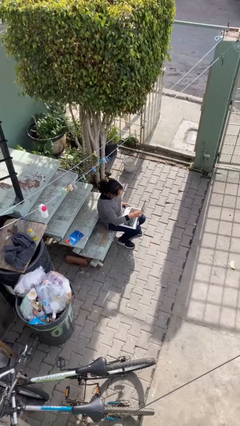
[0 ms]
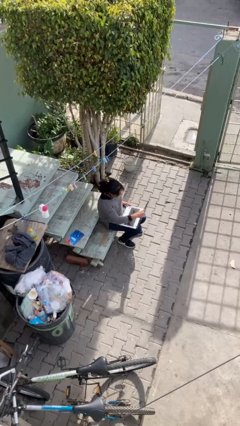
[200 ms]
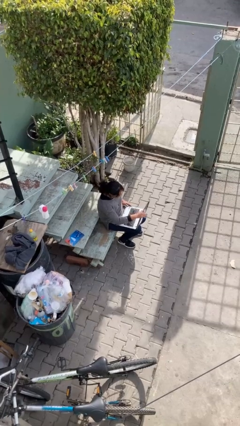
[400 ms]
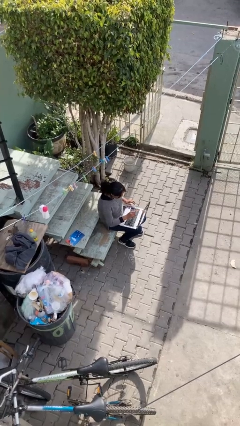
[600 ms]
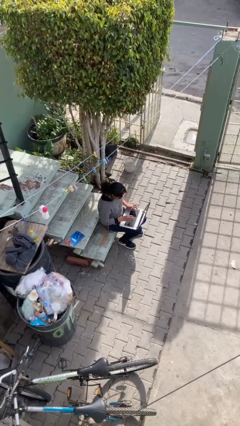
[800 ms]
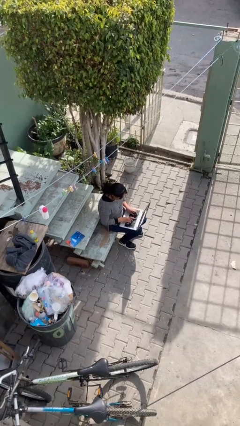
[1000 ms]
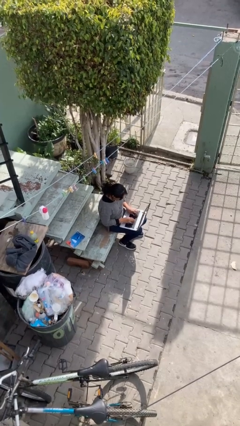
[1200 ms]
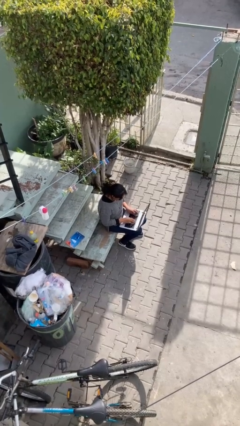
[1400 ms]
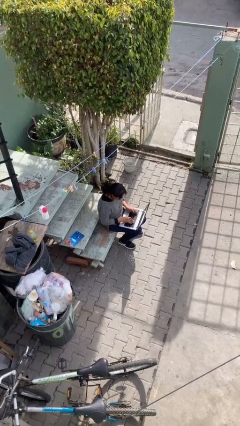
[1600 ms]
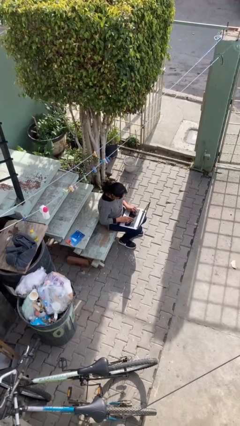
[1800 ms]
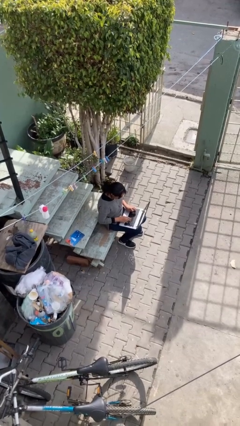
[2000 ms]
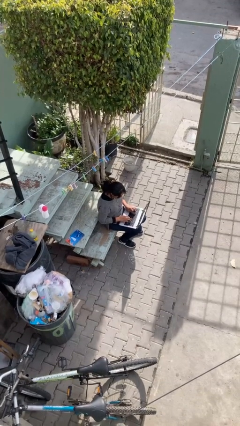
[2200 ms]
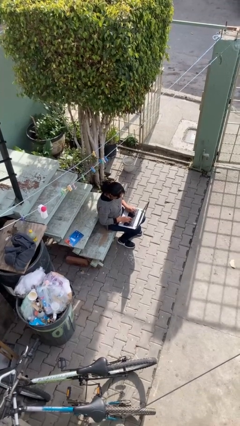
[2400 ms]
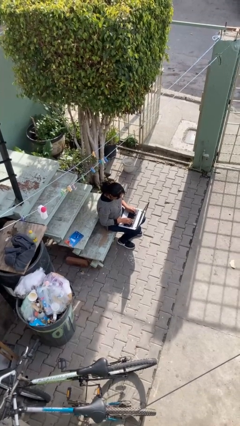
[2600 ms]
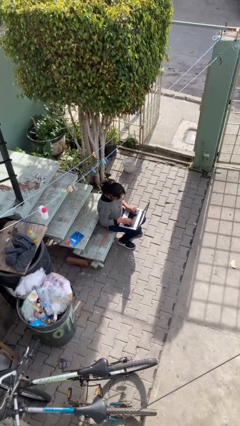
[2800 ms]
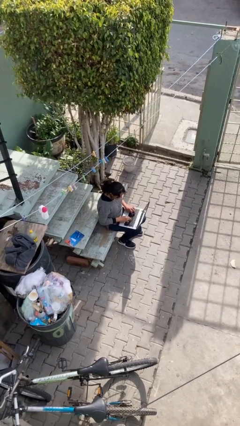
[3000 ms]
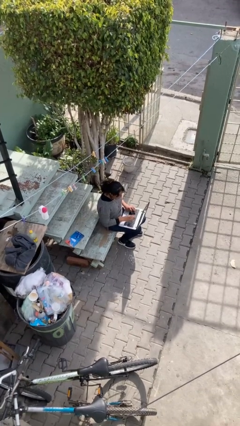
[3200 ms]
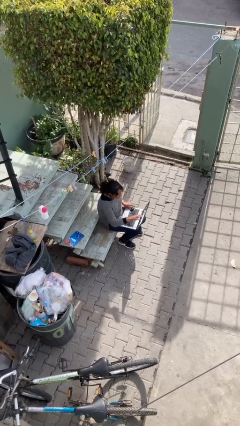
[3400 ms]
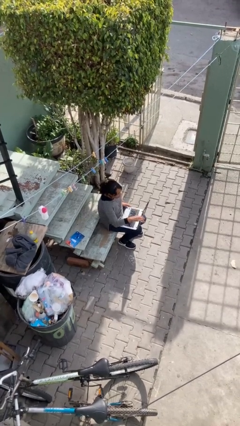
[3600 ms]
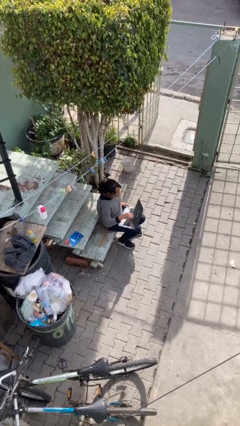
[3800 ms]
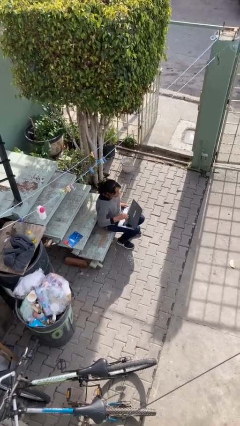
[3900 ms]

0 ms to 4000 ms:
person interacts with laptop

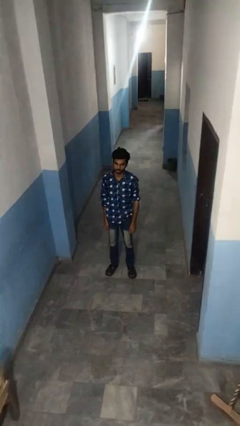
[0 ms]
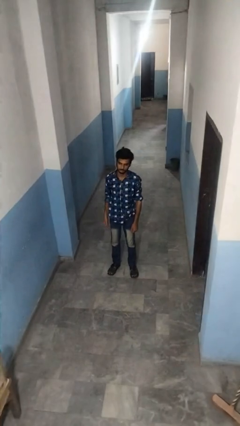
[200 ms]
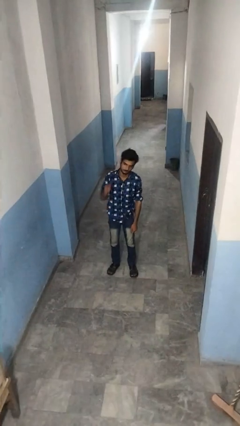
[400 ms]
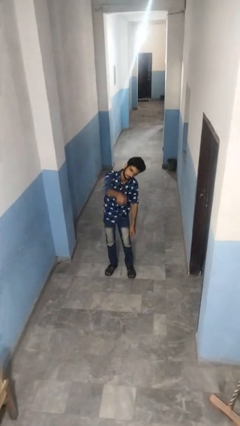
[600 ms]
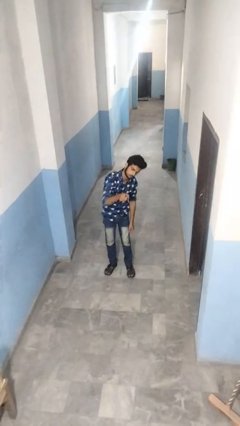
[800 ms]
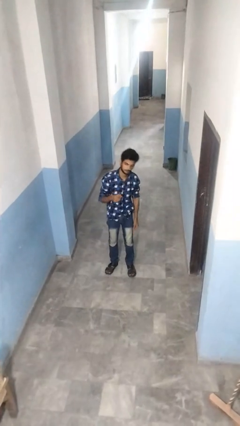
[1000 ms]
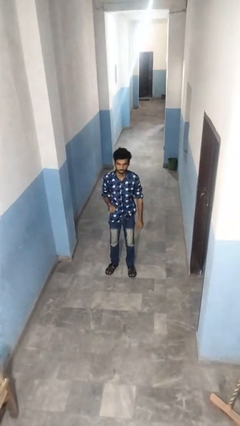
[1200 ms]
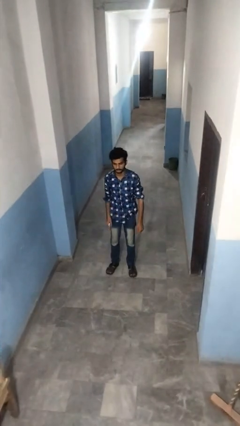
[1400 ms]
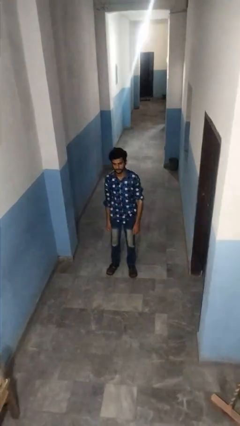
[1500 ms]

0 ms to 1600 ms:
person punches

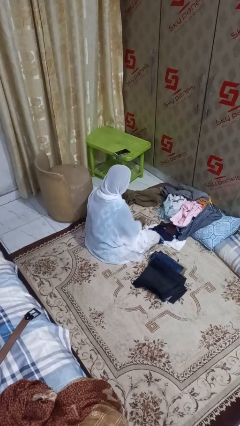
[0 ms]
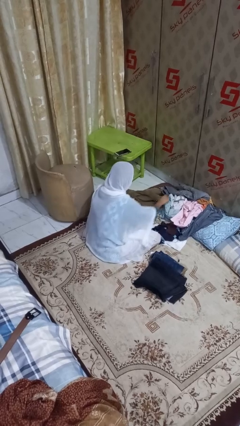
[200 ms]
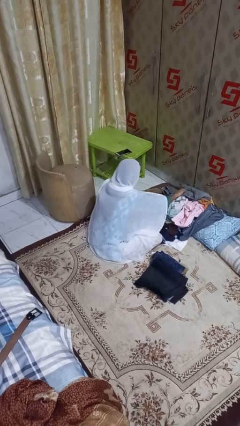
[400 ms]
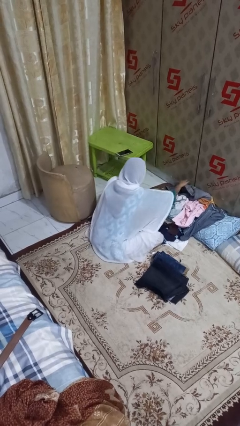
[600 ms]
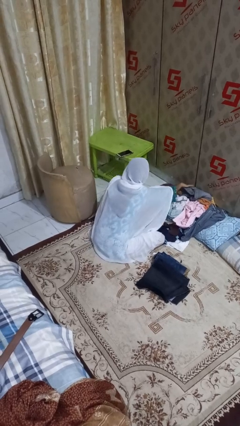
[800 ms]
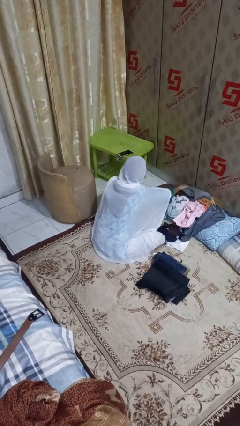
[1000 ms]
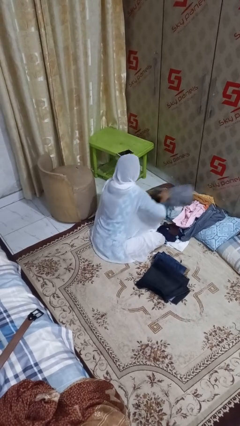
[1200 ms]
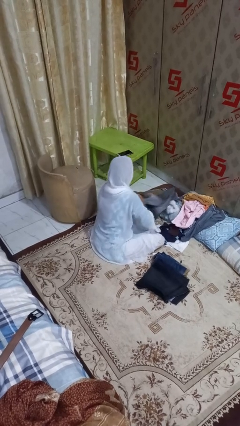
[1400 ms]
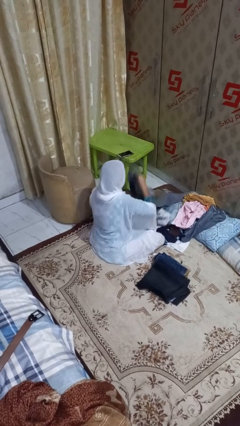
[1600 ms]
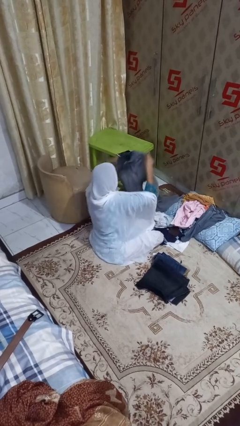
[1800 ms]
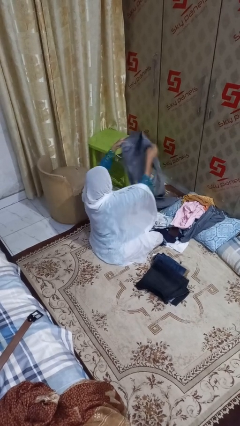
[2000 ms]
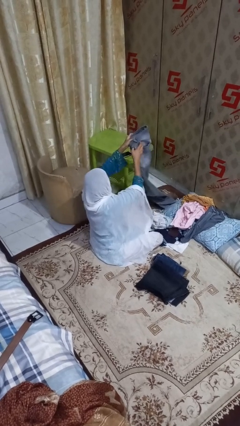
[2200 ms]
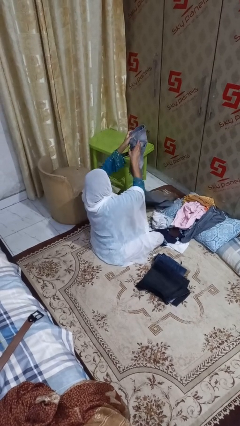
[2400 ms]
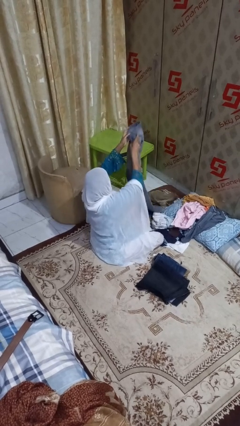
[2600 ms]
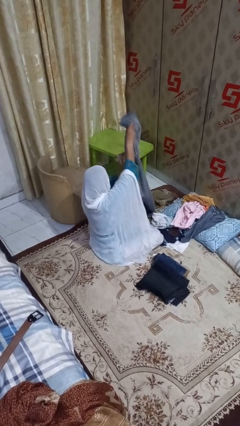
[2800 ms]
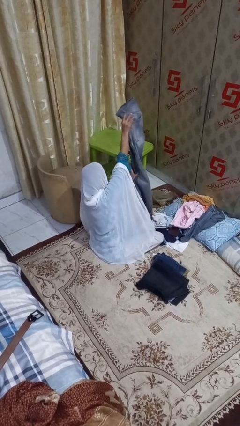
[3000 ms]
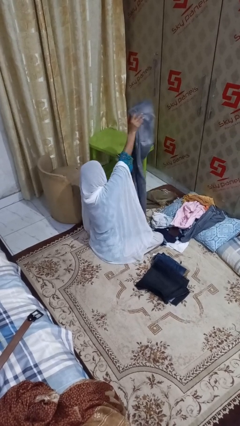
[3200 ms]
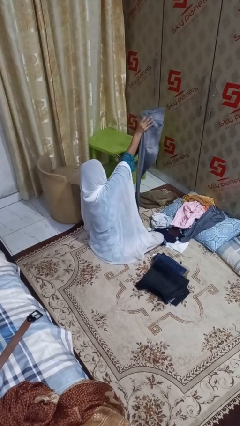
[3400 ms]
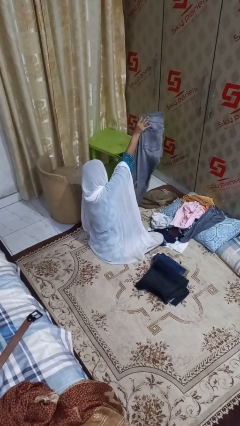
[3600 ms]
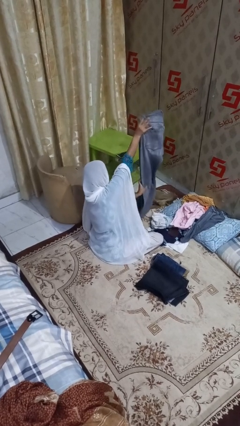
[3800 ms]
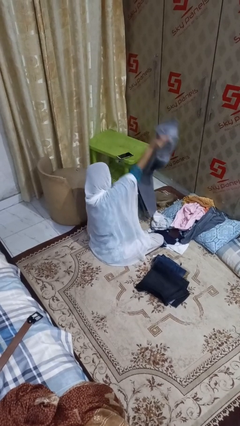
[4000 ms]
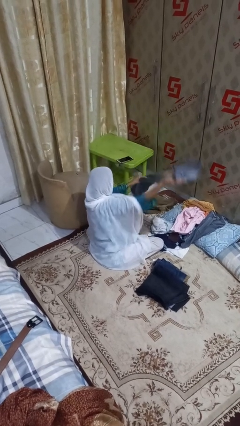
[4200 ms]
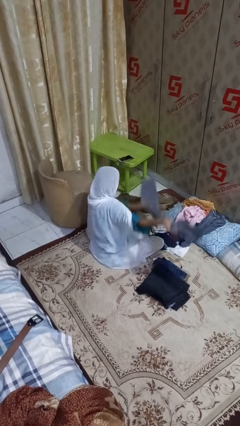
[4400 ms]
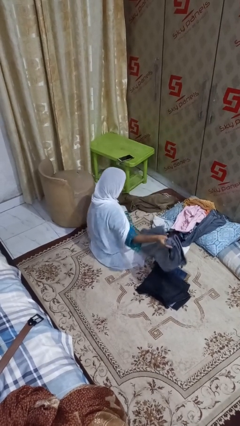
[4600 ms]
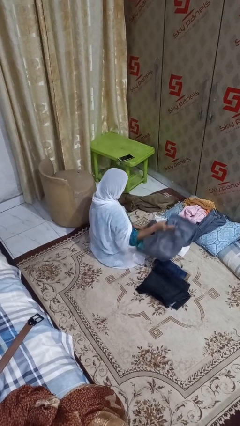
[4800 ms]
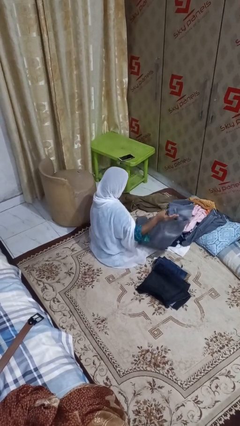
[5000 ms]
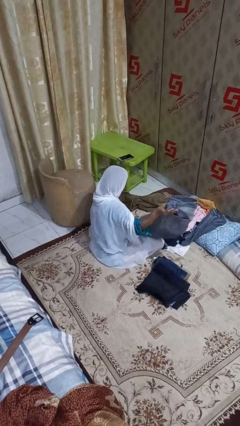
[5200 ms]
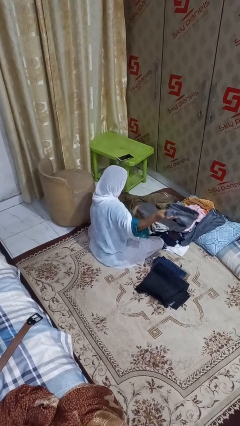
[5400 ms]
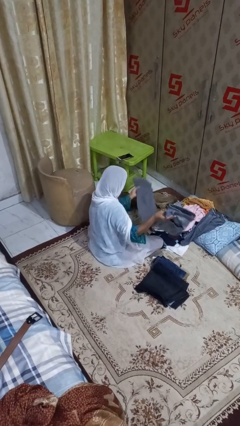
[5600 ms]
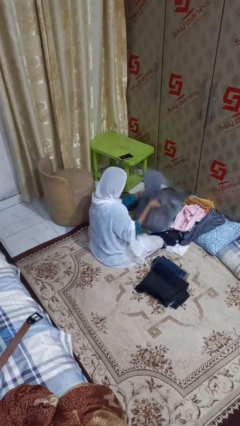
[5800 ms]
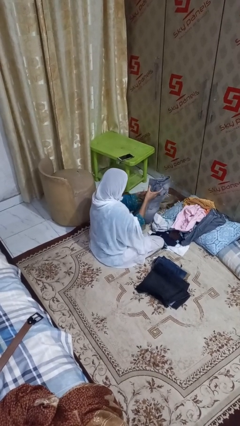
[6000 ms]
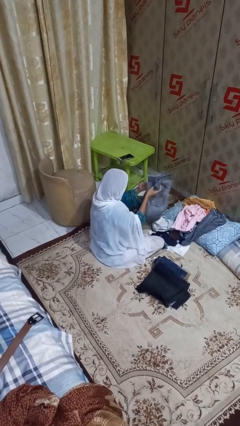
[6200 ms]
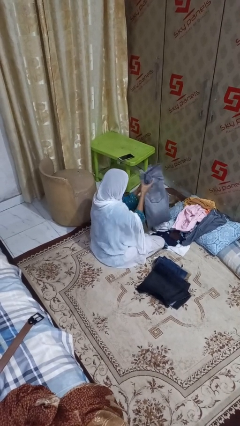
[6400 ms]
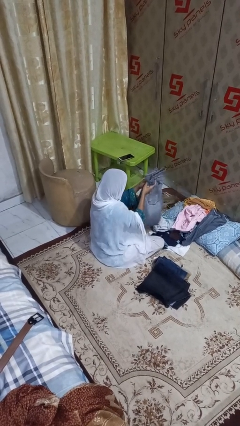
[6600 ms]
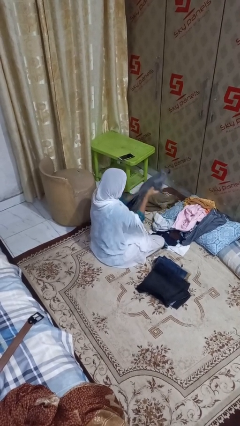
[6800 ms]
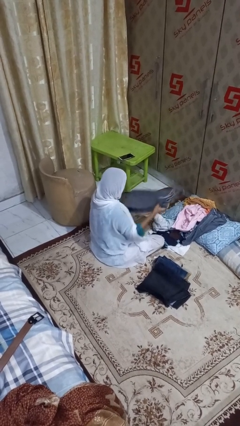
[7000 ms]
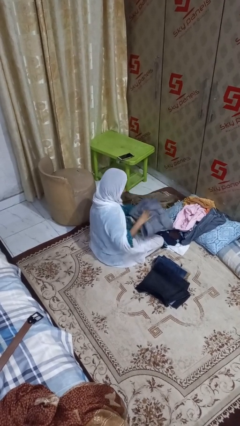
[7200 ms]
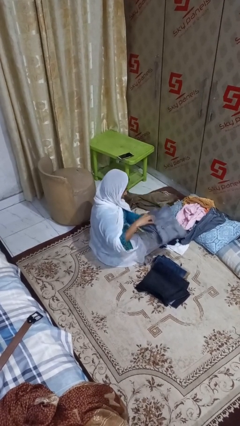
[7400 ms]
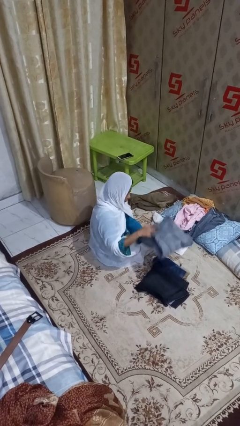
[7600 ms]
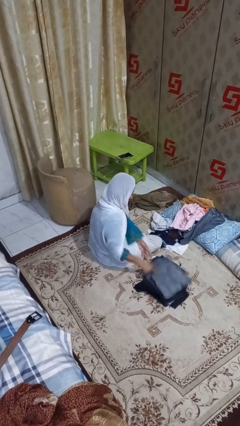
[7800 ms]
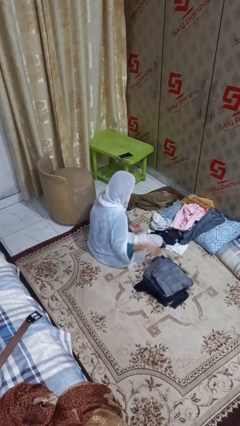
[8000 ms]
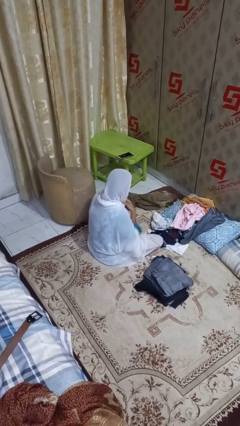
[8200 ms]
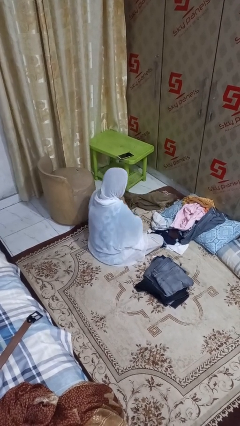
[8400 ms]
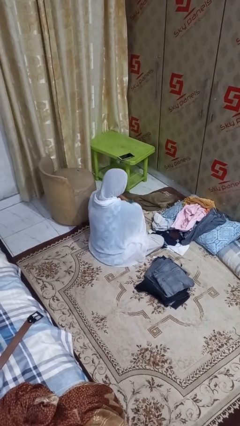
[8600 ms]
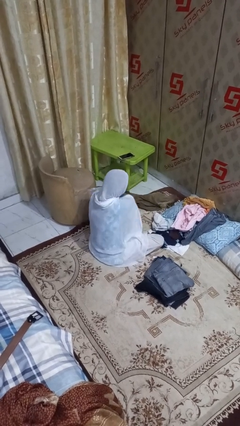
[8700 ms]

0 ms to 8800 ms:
person folds pants

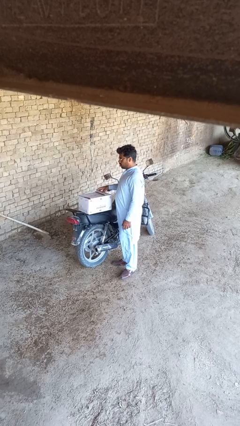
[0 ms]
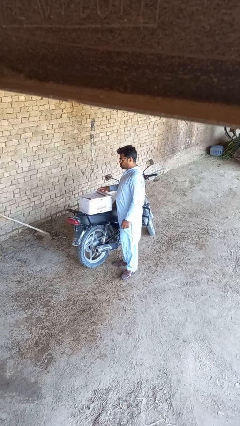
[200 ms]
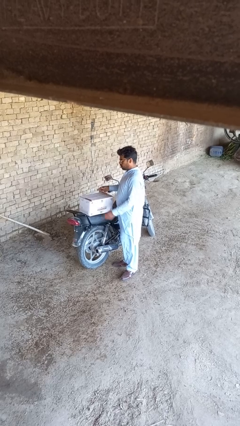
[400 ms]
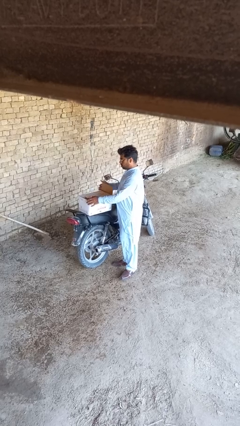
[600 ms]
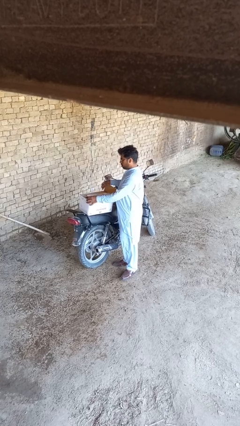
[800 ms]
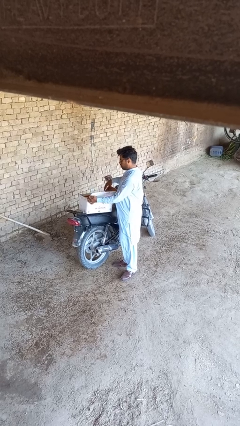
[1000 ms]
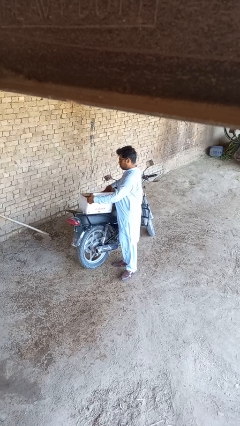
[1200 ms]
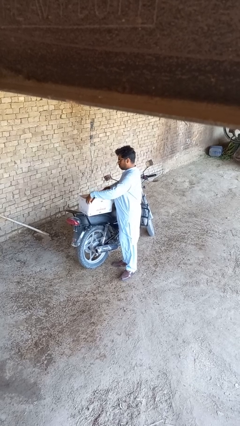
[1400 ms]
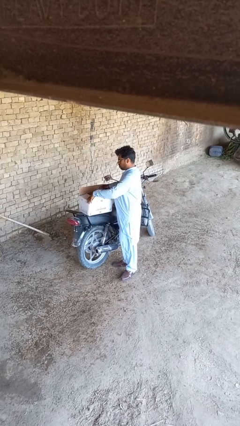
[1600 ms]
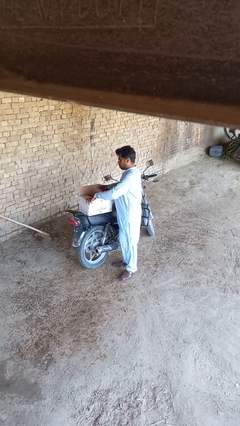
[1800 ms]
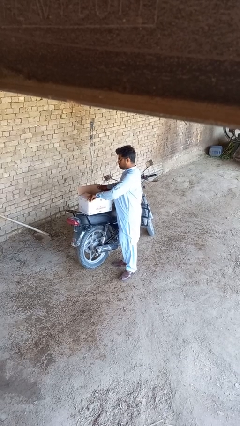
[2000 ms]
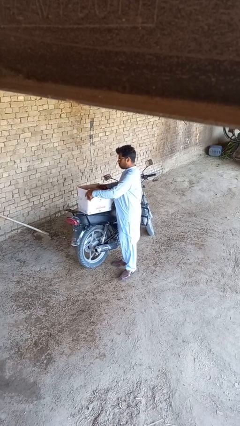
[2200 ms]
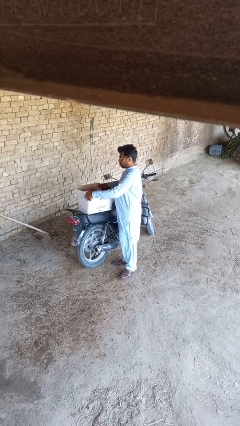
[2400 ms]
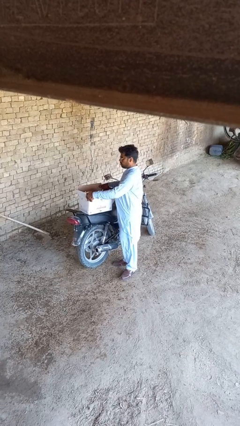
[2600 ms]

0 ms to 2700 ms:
person opens box

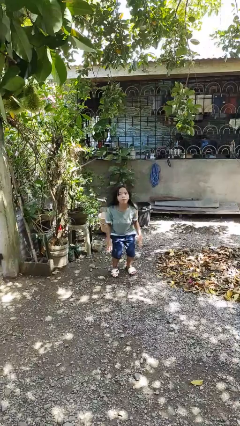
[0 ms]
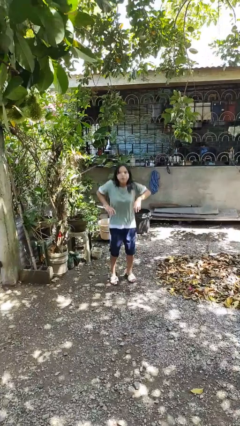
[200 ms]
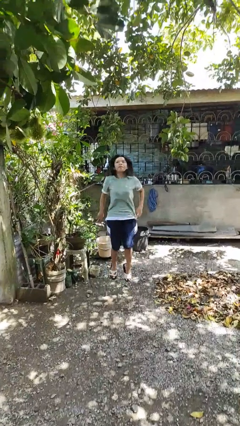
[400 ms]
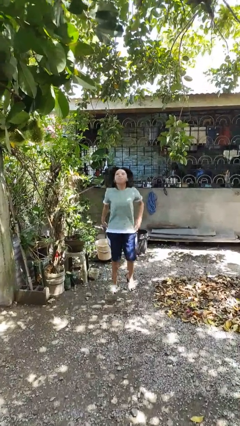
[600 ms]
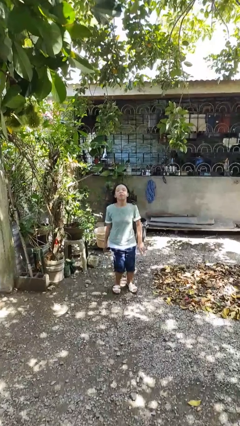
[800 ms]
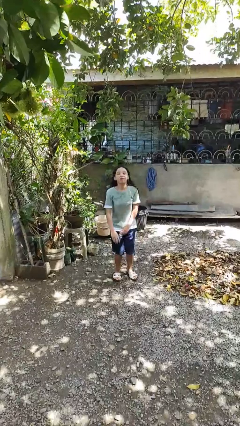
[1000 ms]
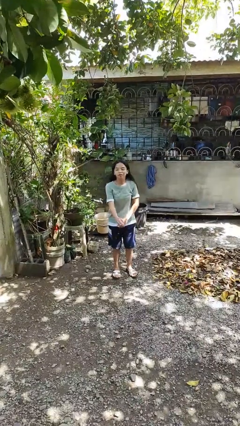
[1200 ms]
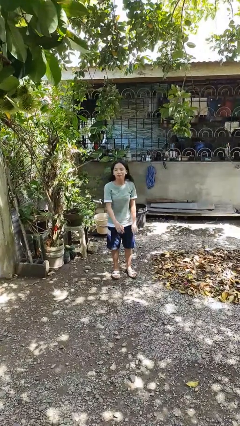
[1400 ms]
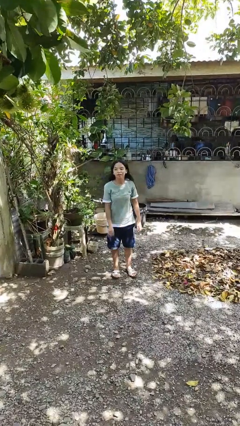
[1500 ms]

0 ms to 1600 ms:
person jumps
